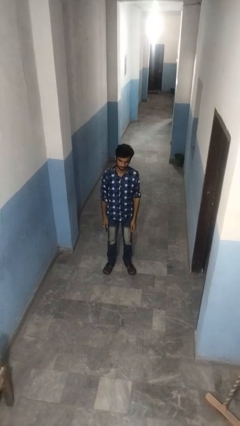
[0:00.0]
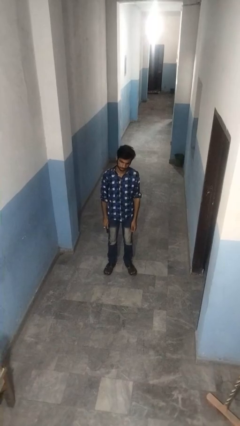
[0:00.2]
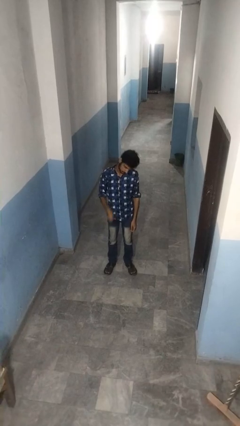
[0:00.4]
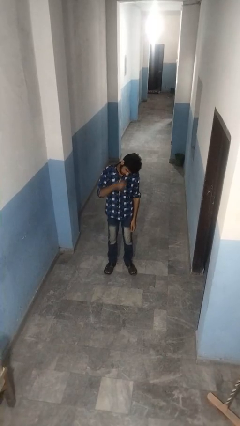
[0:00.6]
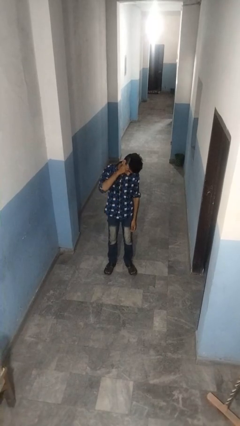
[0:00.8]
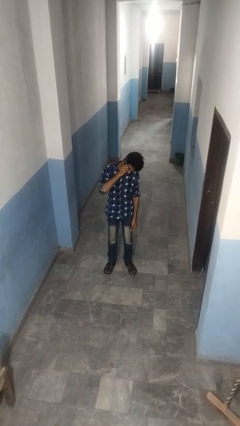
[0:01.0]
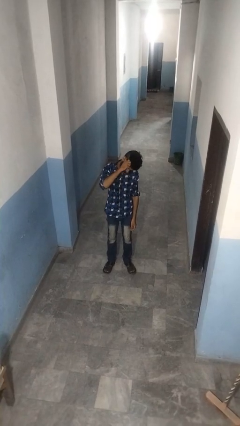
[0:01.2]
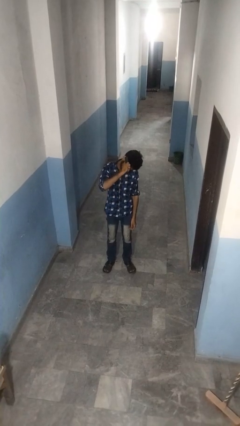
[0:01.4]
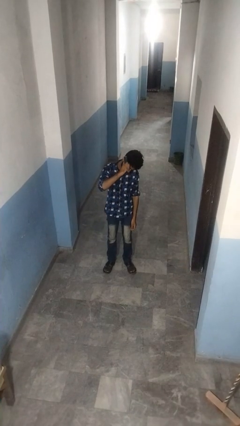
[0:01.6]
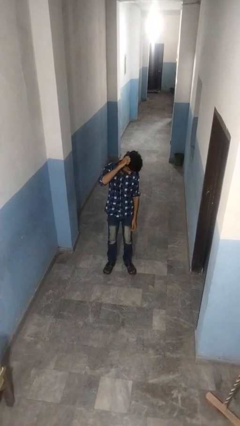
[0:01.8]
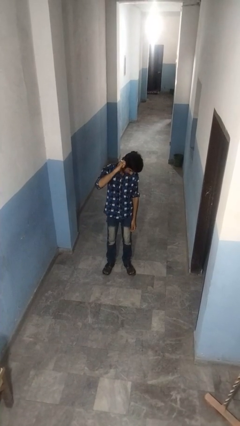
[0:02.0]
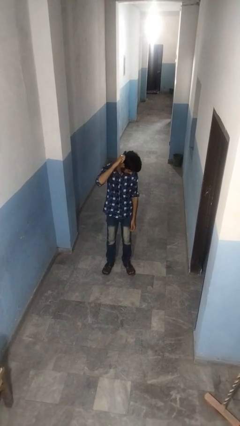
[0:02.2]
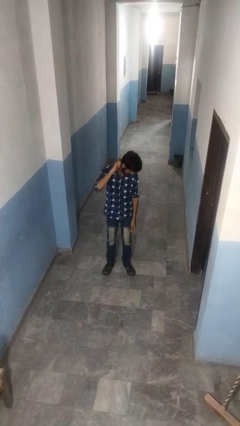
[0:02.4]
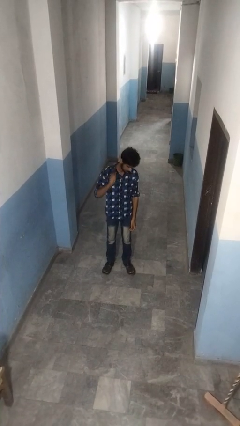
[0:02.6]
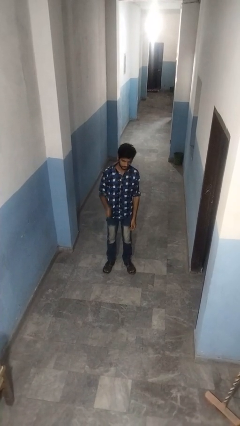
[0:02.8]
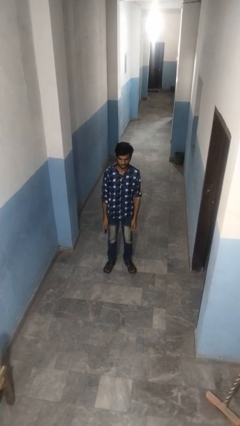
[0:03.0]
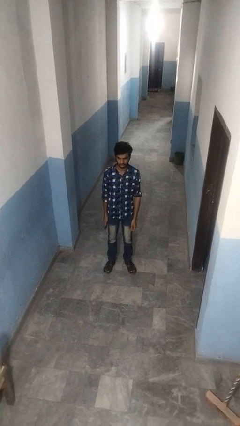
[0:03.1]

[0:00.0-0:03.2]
person brushes hair

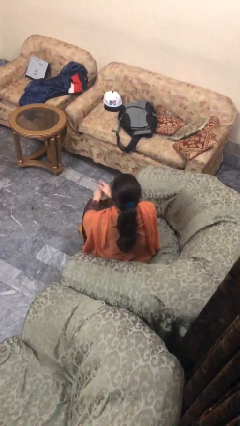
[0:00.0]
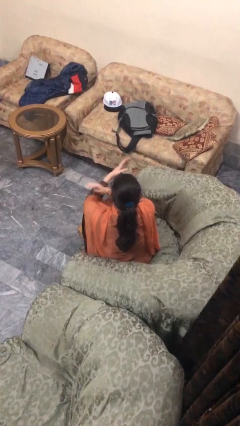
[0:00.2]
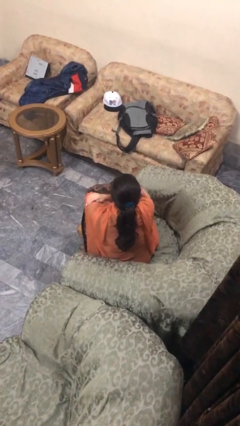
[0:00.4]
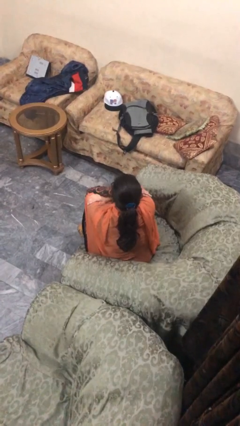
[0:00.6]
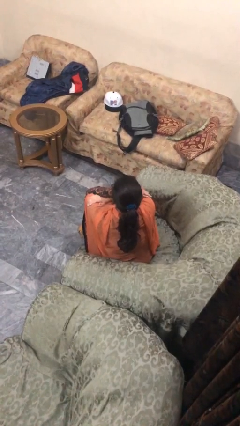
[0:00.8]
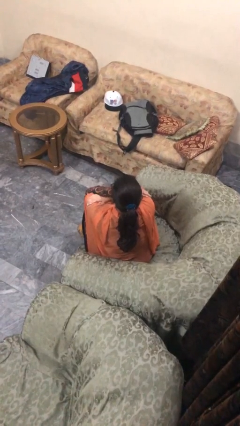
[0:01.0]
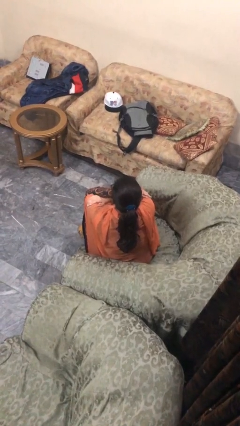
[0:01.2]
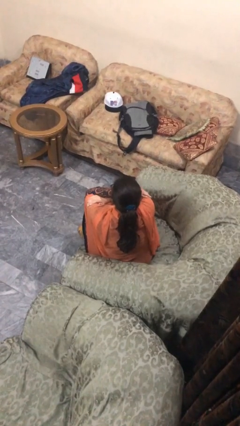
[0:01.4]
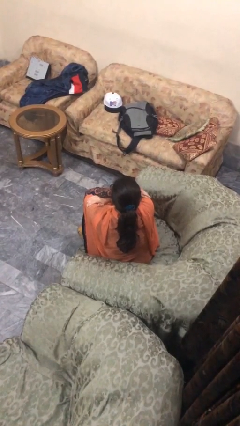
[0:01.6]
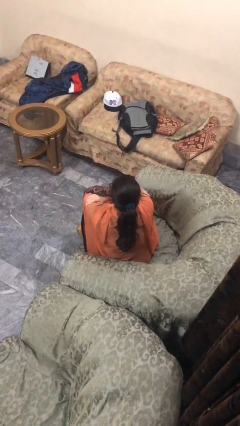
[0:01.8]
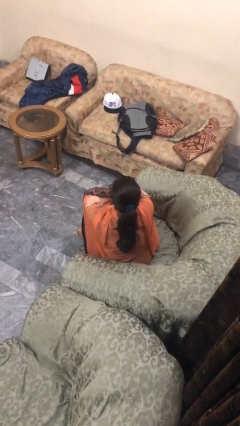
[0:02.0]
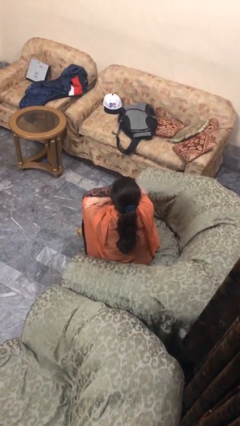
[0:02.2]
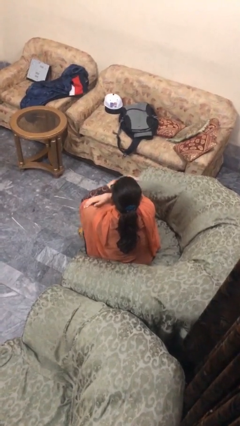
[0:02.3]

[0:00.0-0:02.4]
person crosses arms

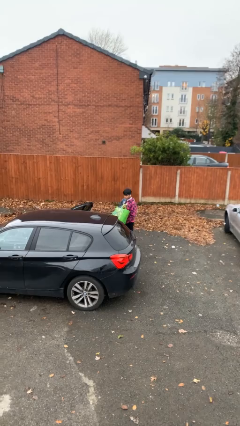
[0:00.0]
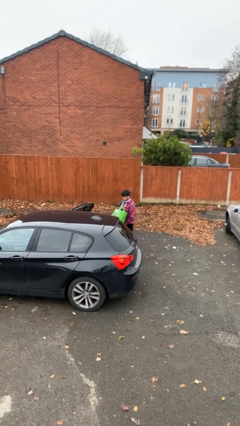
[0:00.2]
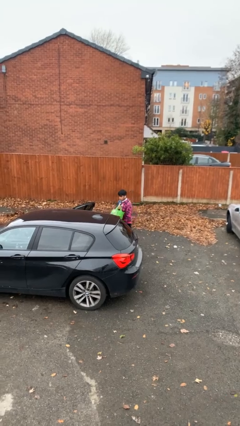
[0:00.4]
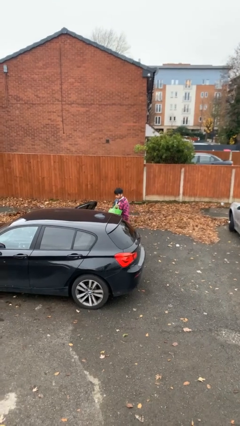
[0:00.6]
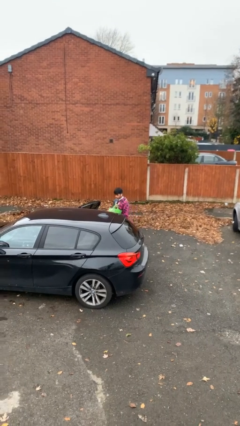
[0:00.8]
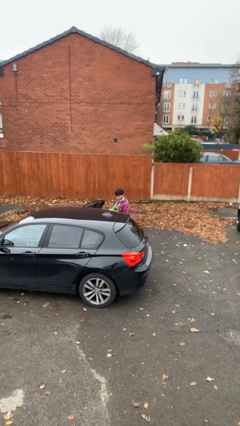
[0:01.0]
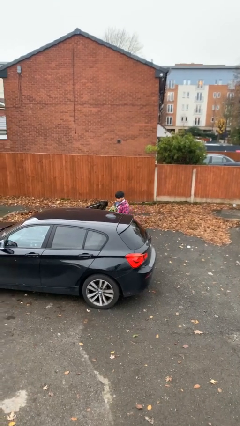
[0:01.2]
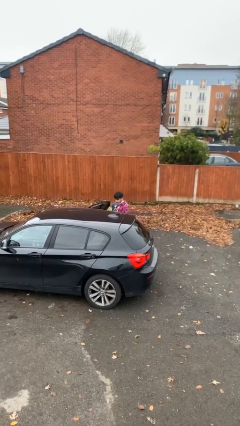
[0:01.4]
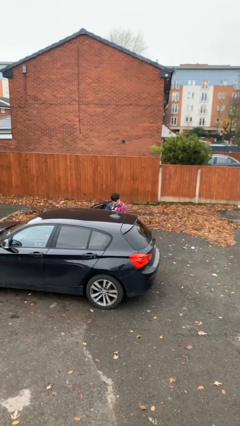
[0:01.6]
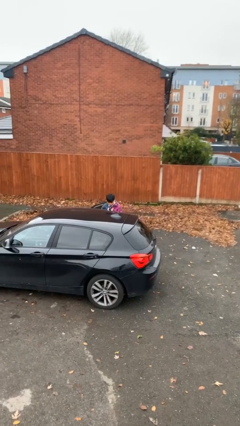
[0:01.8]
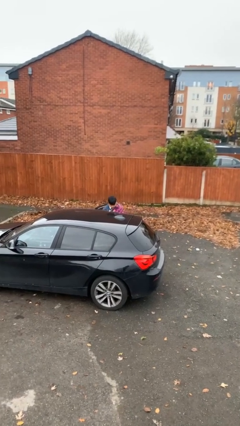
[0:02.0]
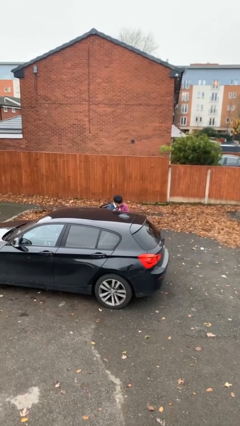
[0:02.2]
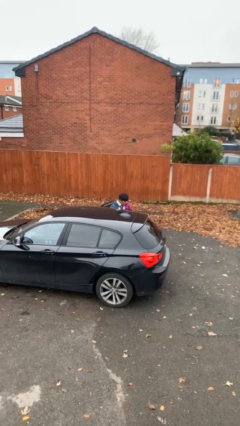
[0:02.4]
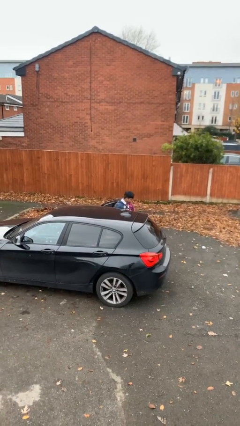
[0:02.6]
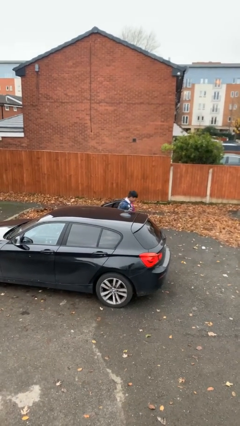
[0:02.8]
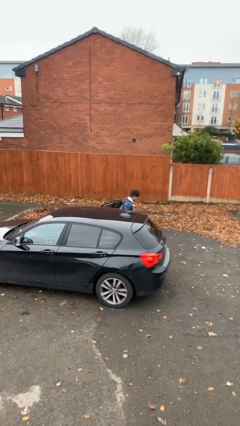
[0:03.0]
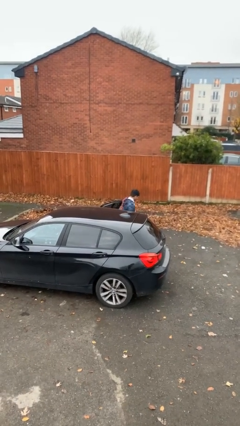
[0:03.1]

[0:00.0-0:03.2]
person loads car

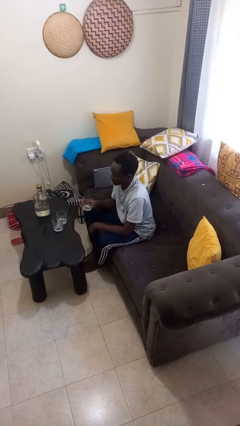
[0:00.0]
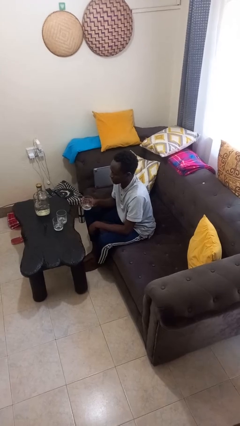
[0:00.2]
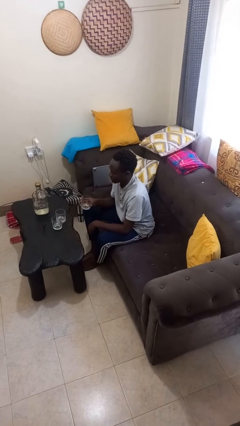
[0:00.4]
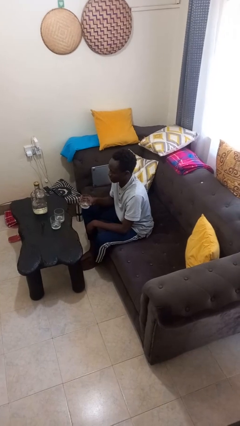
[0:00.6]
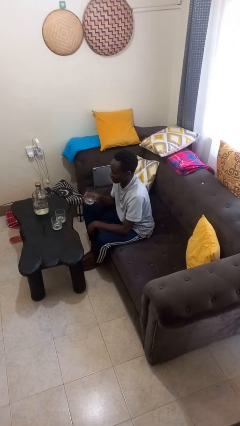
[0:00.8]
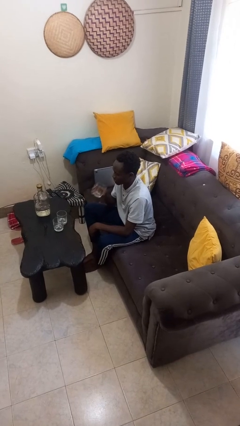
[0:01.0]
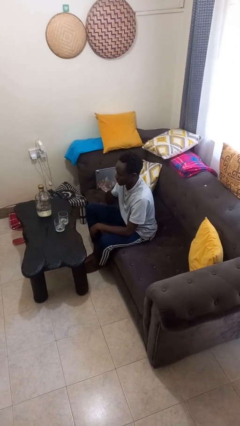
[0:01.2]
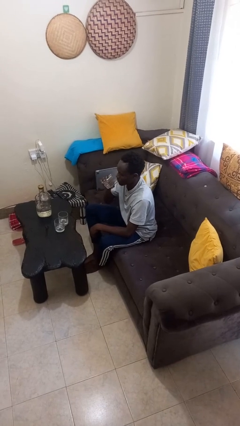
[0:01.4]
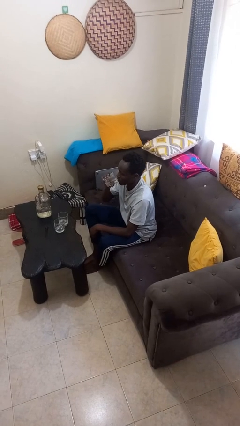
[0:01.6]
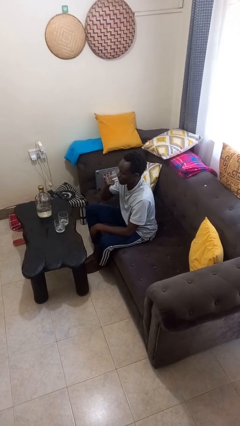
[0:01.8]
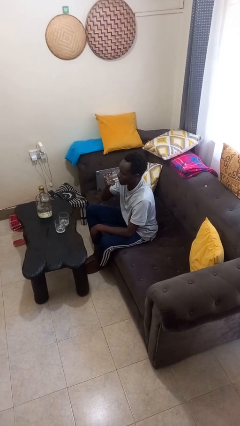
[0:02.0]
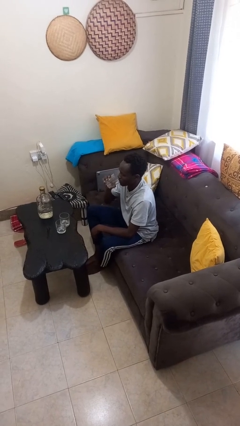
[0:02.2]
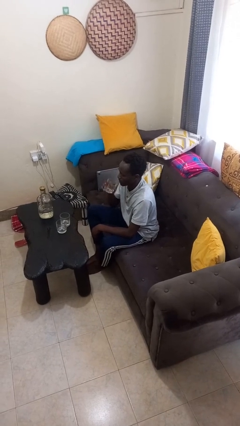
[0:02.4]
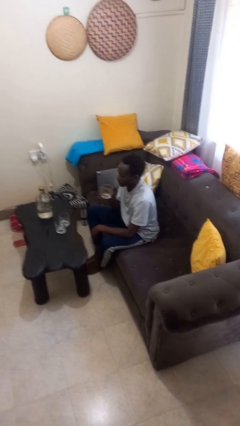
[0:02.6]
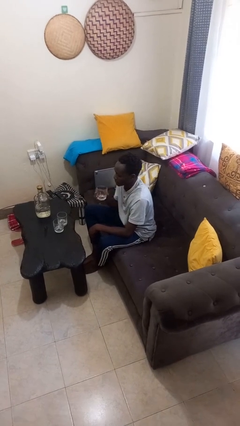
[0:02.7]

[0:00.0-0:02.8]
person drinks from shotglass

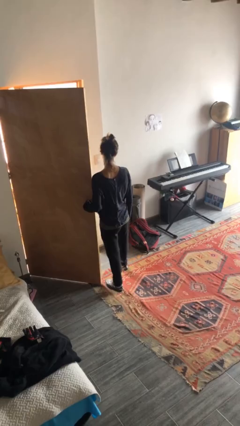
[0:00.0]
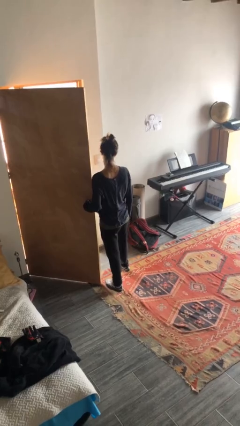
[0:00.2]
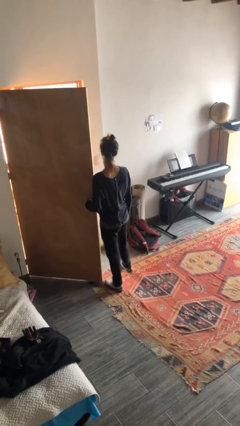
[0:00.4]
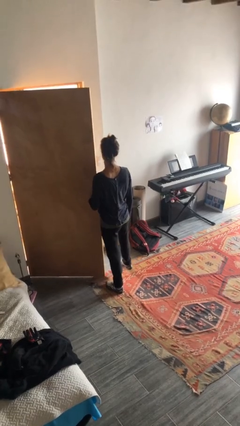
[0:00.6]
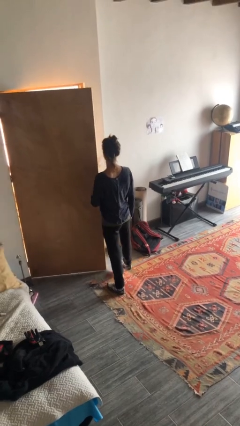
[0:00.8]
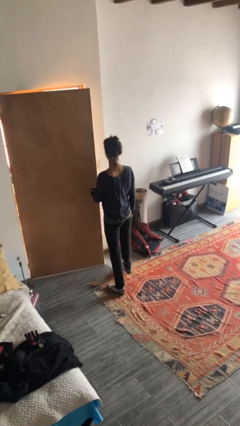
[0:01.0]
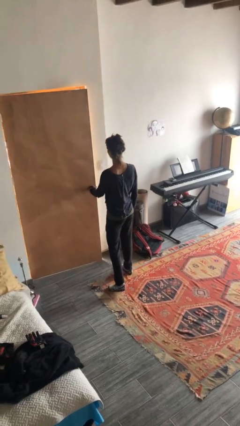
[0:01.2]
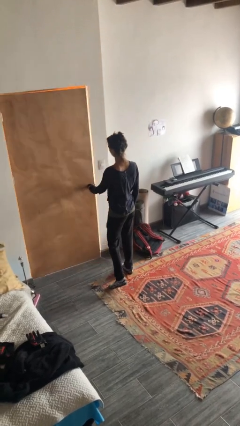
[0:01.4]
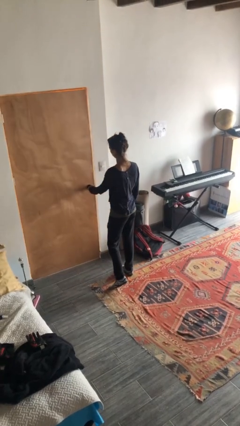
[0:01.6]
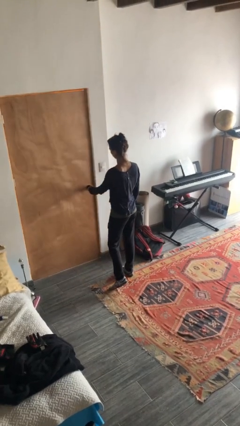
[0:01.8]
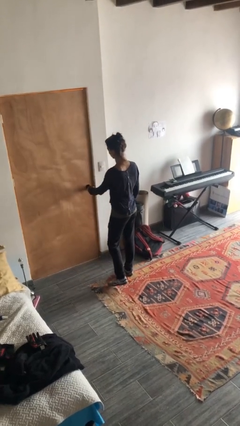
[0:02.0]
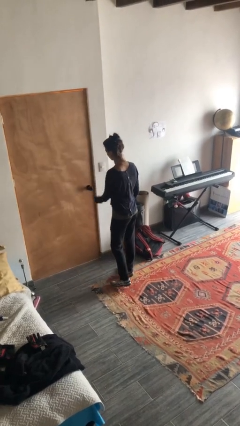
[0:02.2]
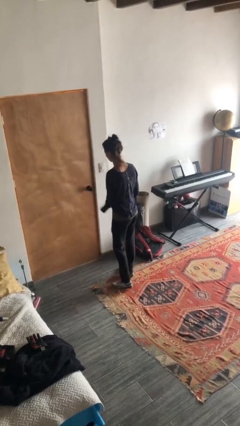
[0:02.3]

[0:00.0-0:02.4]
person closes facility door

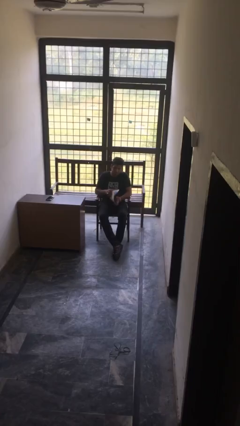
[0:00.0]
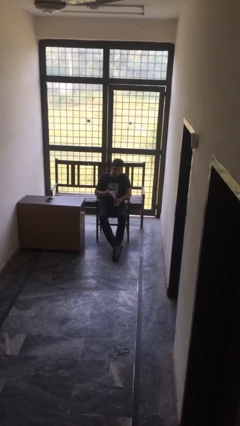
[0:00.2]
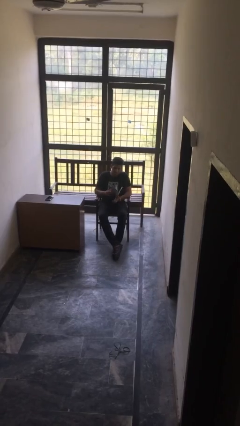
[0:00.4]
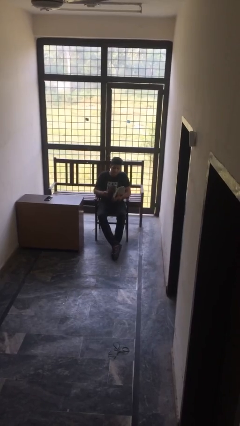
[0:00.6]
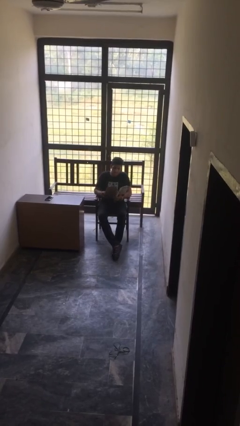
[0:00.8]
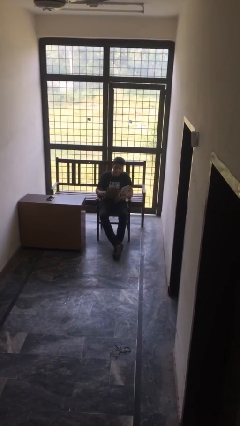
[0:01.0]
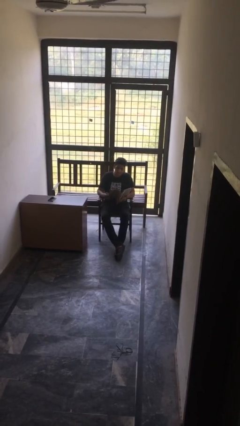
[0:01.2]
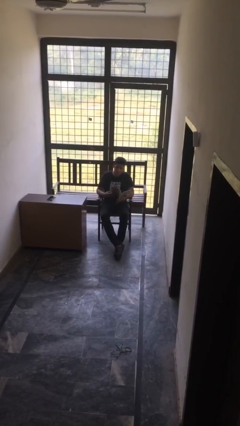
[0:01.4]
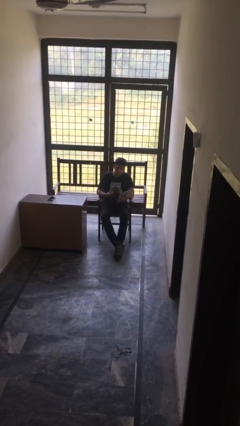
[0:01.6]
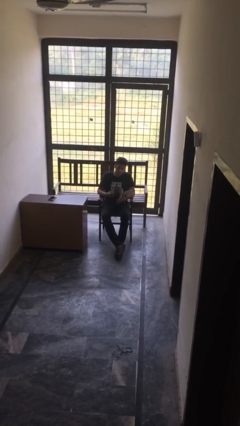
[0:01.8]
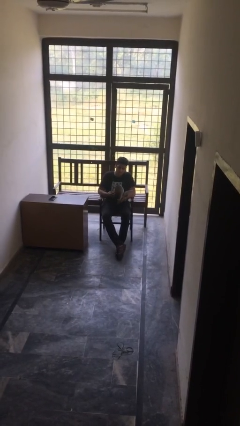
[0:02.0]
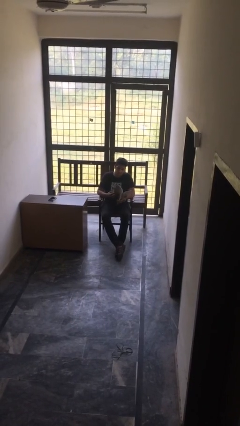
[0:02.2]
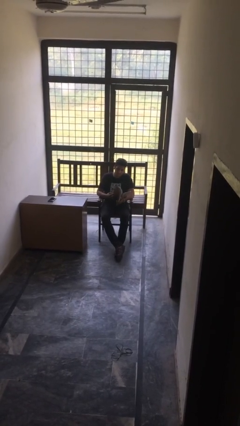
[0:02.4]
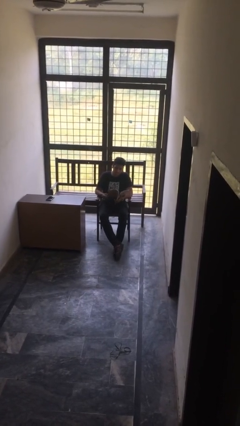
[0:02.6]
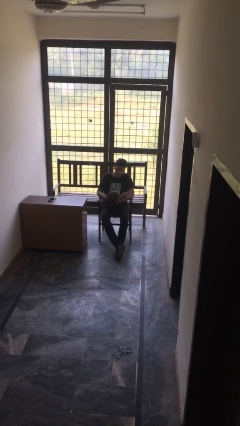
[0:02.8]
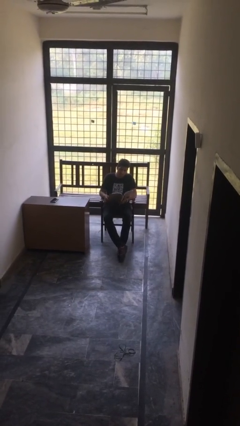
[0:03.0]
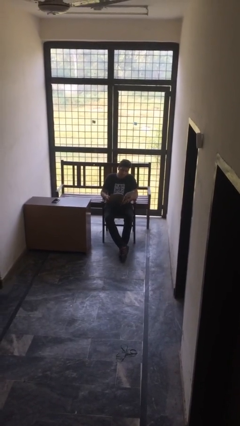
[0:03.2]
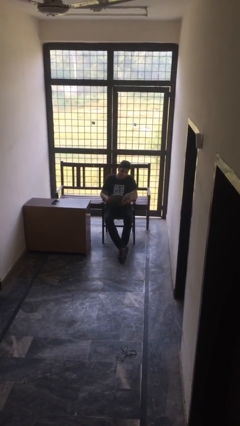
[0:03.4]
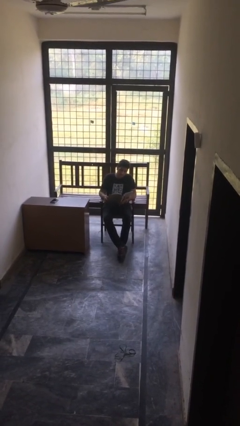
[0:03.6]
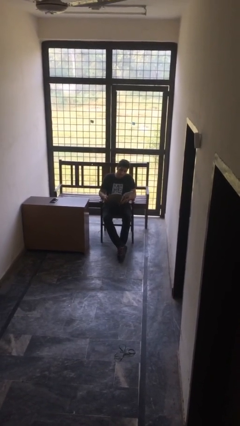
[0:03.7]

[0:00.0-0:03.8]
person reads document
